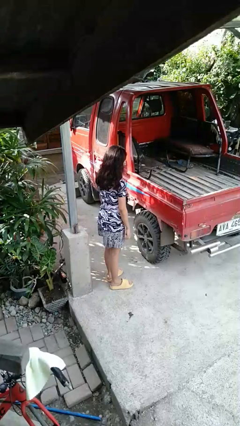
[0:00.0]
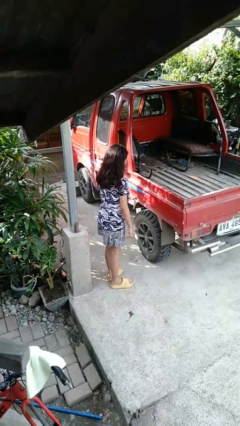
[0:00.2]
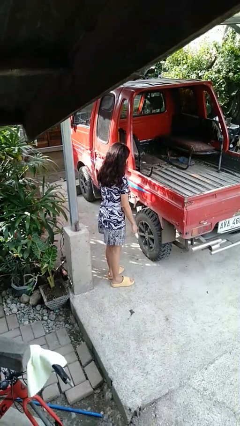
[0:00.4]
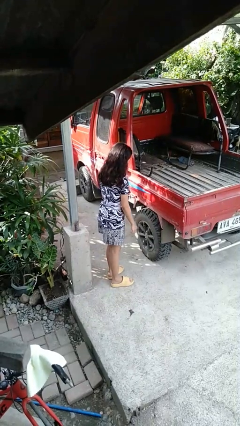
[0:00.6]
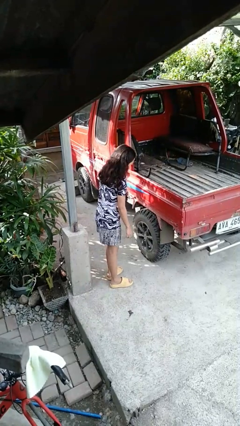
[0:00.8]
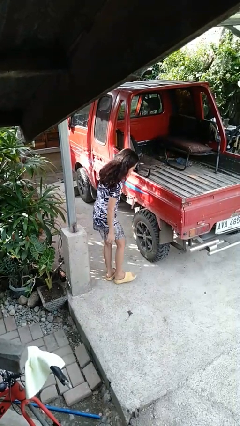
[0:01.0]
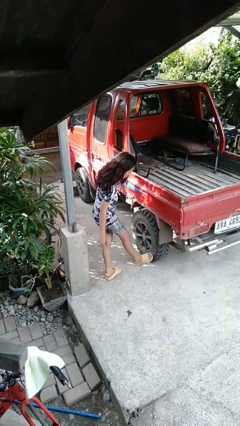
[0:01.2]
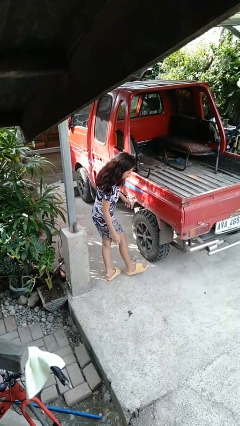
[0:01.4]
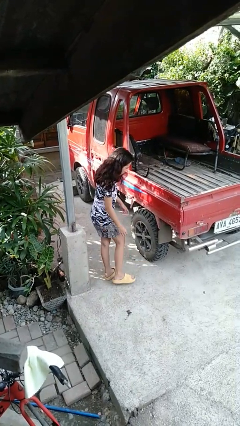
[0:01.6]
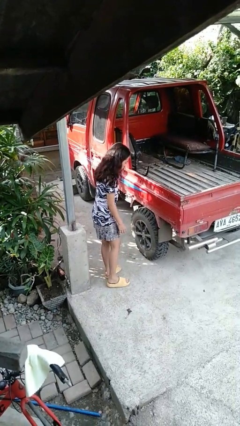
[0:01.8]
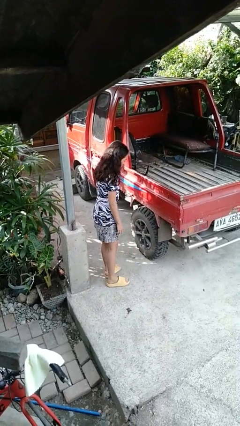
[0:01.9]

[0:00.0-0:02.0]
person kicks car tires

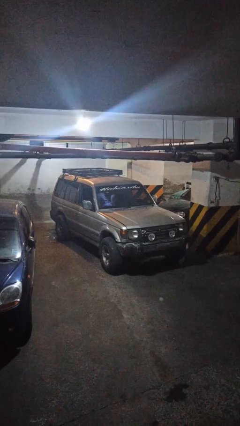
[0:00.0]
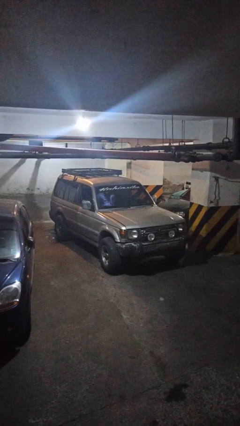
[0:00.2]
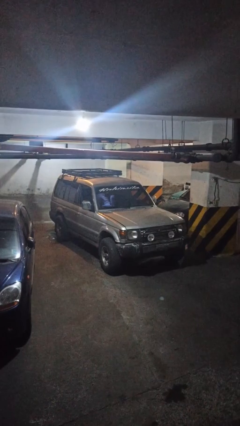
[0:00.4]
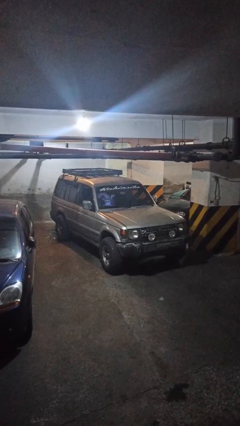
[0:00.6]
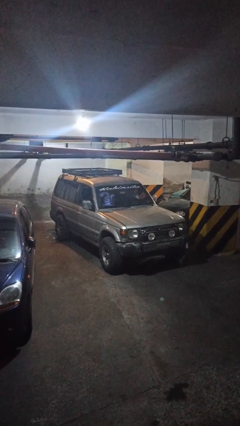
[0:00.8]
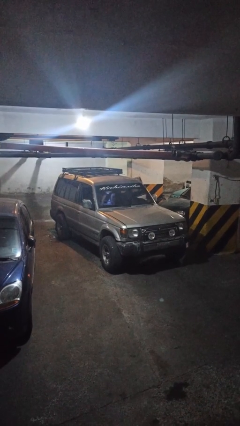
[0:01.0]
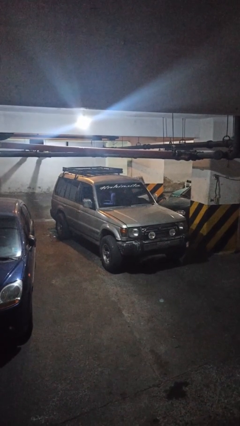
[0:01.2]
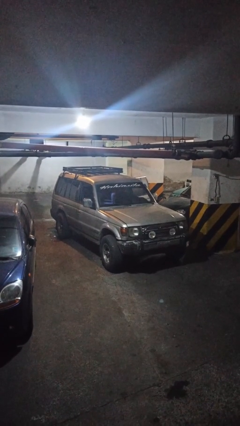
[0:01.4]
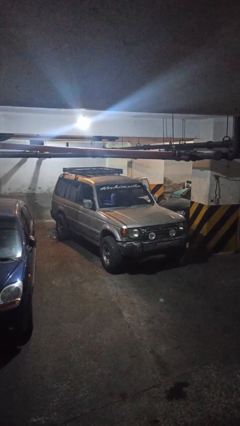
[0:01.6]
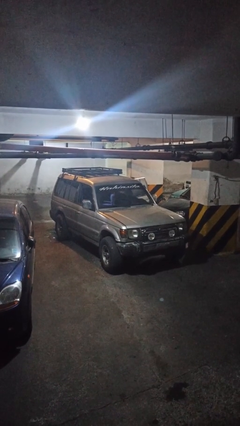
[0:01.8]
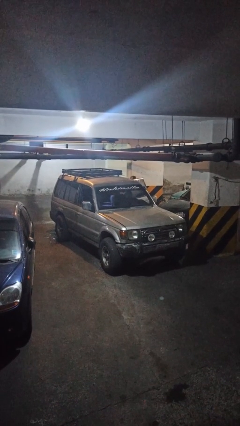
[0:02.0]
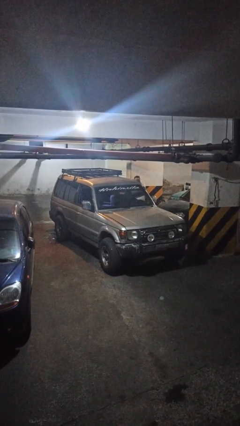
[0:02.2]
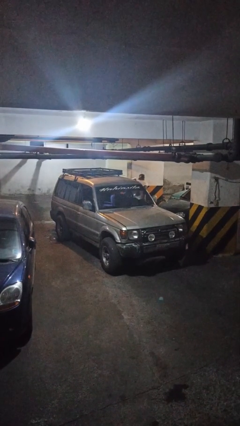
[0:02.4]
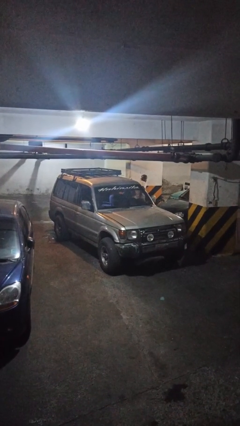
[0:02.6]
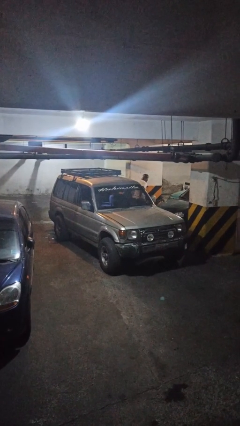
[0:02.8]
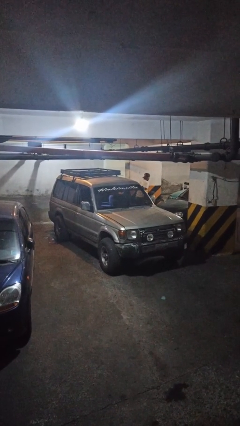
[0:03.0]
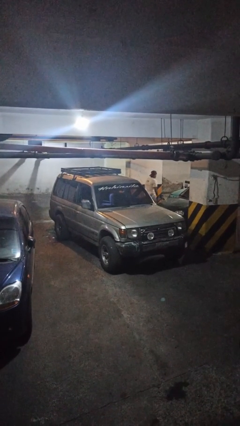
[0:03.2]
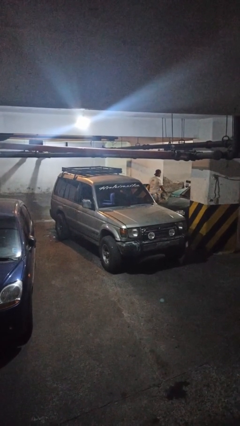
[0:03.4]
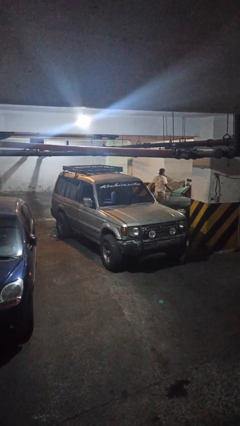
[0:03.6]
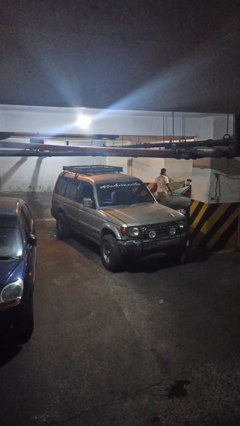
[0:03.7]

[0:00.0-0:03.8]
car drops off person

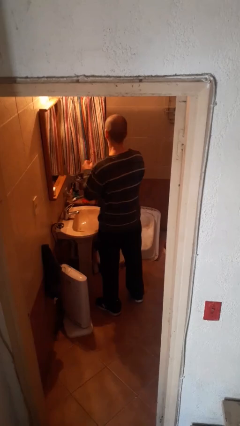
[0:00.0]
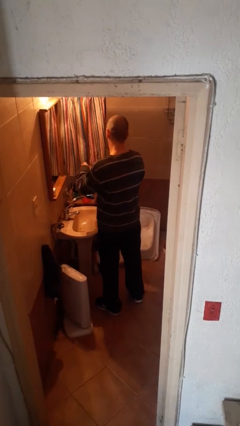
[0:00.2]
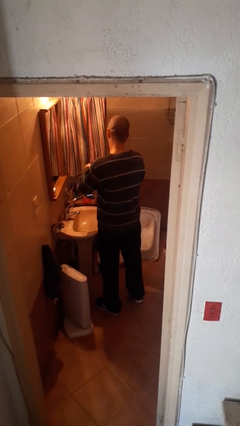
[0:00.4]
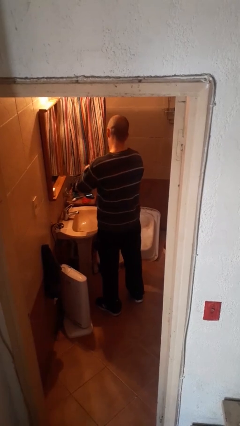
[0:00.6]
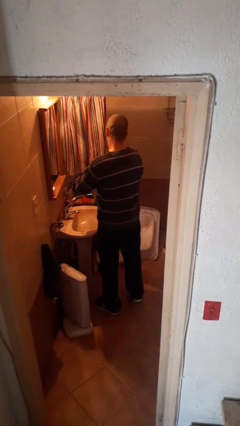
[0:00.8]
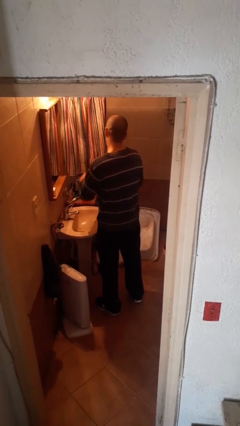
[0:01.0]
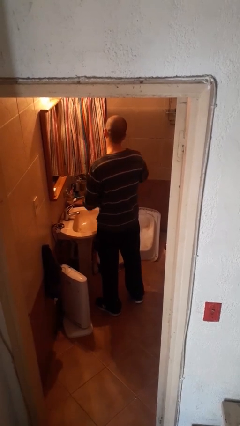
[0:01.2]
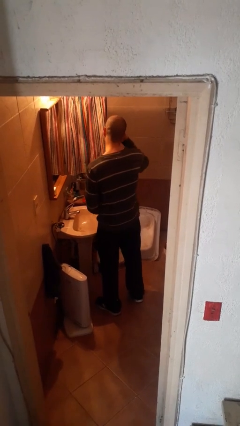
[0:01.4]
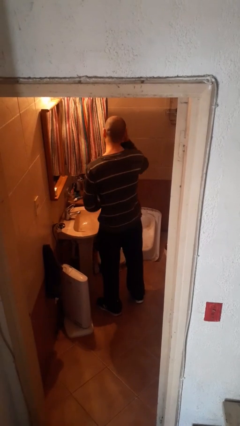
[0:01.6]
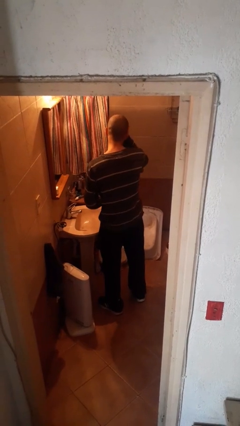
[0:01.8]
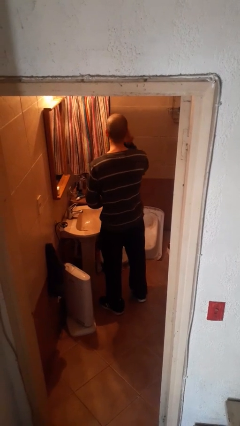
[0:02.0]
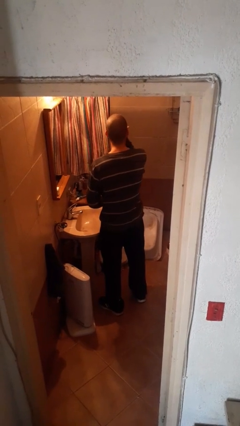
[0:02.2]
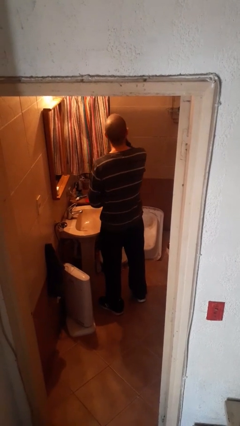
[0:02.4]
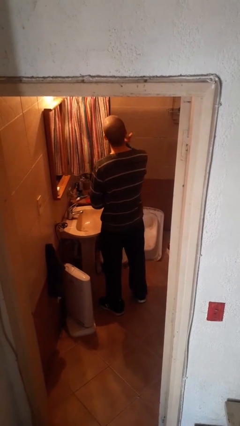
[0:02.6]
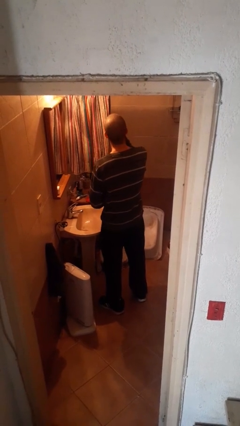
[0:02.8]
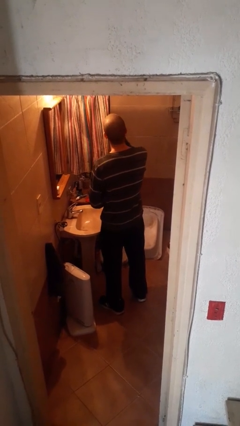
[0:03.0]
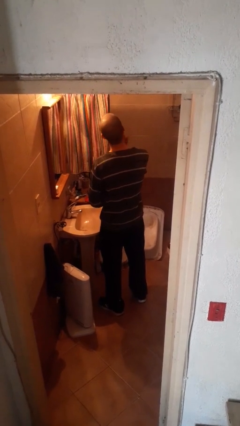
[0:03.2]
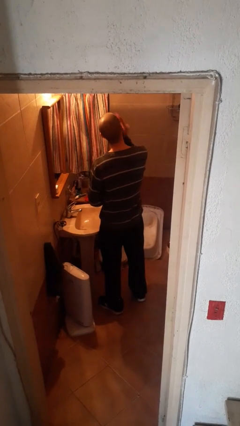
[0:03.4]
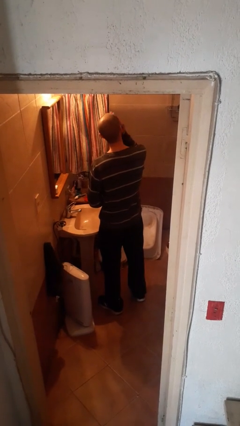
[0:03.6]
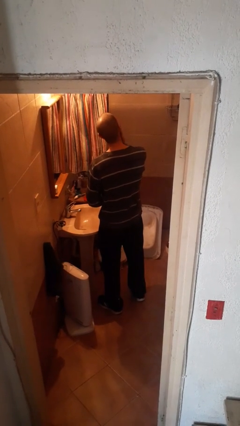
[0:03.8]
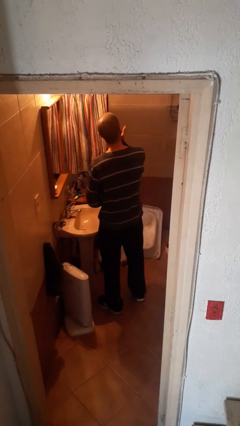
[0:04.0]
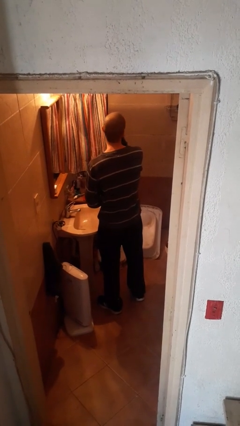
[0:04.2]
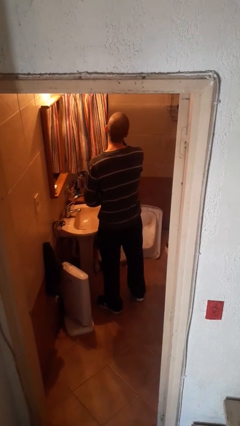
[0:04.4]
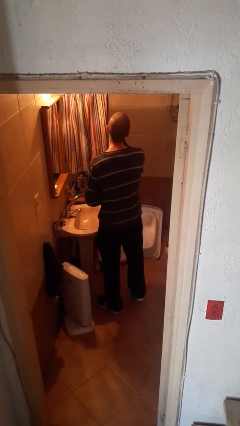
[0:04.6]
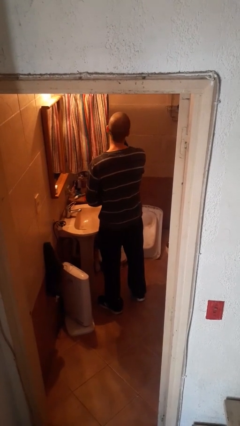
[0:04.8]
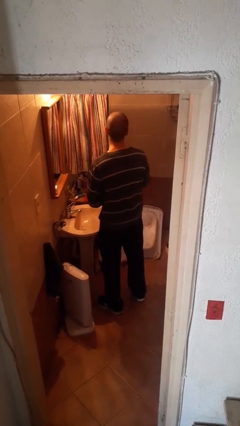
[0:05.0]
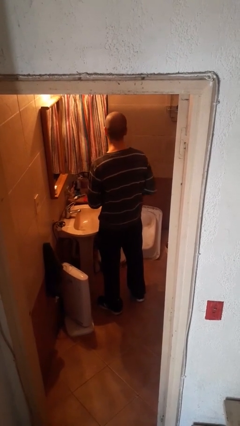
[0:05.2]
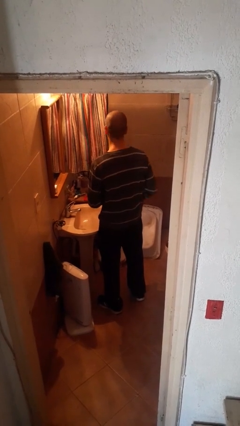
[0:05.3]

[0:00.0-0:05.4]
person applies facial moisturizer

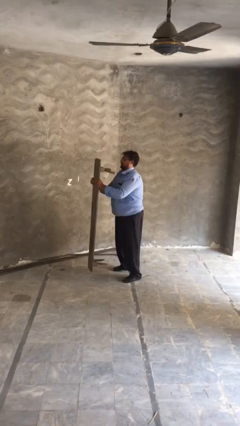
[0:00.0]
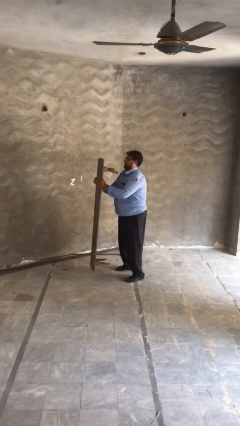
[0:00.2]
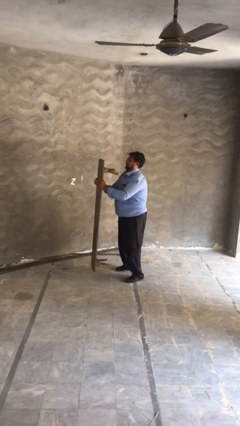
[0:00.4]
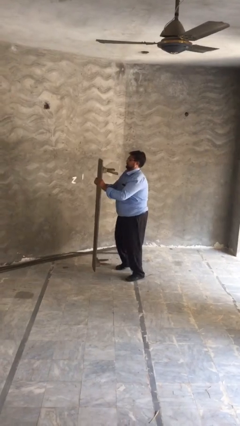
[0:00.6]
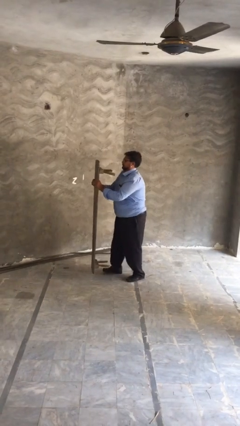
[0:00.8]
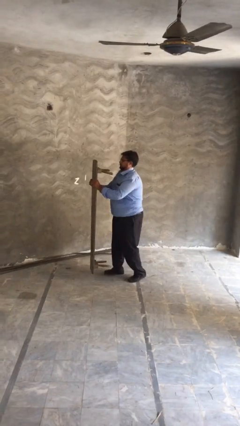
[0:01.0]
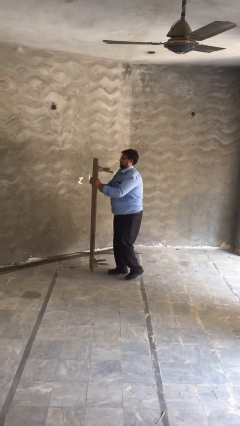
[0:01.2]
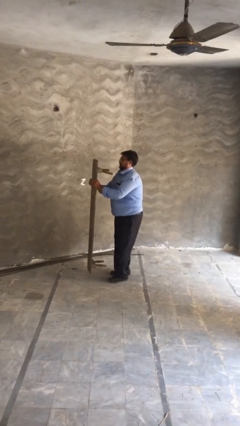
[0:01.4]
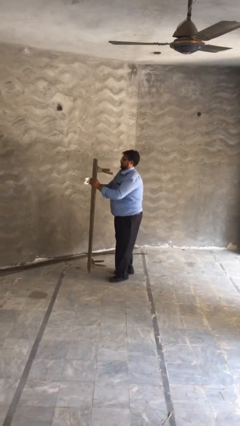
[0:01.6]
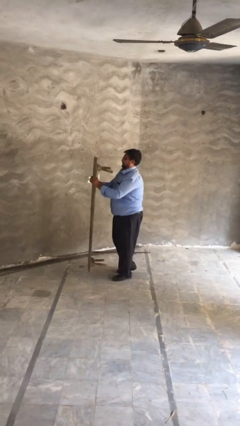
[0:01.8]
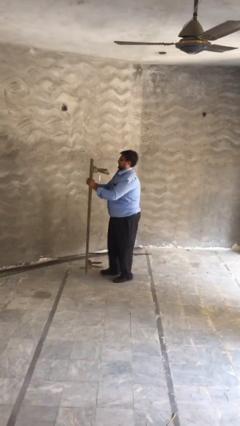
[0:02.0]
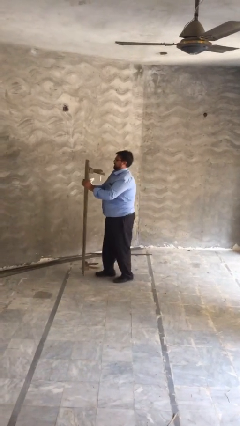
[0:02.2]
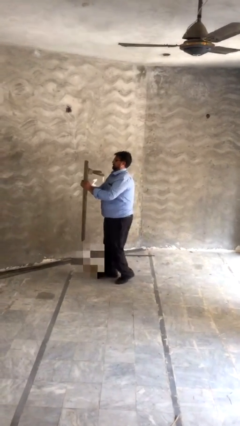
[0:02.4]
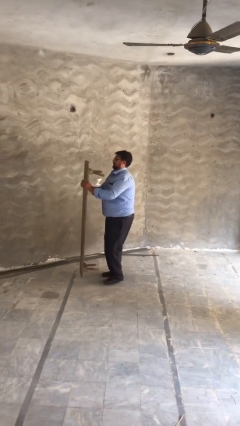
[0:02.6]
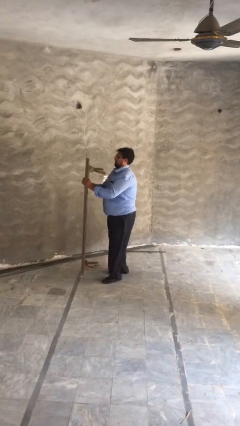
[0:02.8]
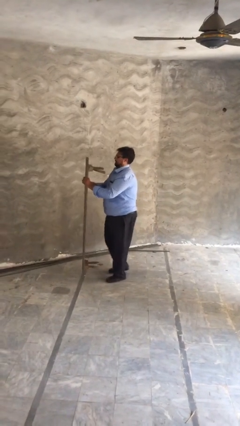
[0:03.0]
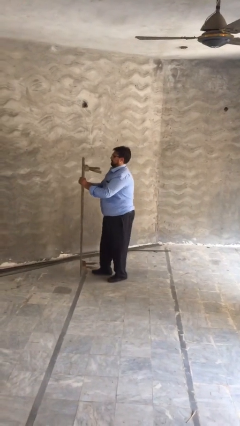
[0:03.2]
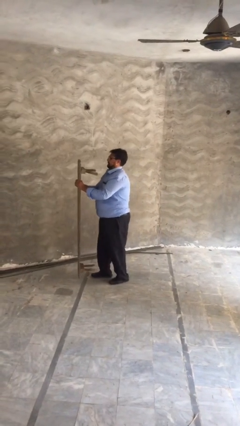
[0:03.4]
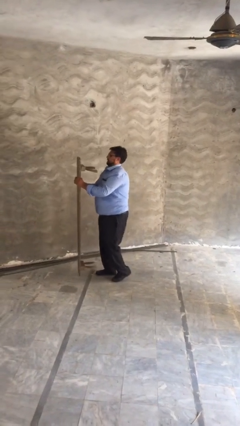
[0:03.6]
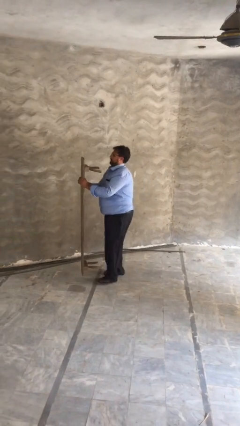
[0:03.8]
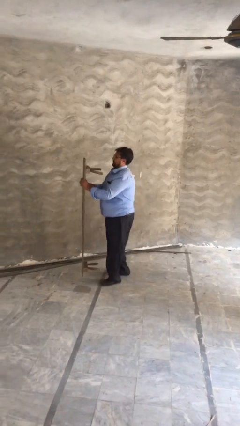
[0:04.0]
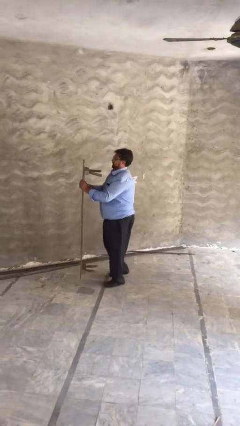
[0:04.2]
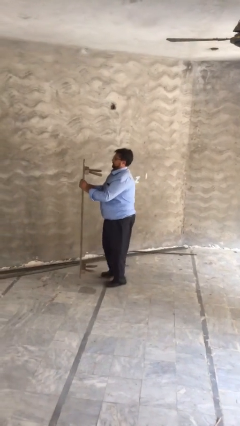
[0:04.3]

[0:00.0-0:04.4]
person carries heavy object

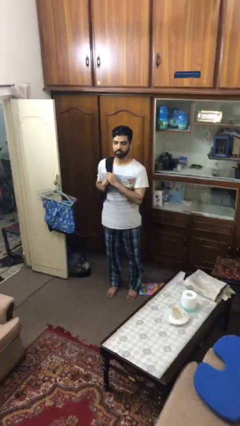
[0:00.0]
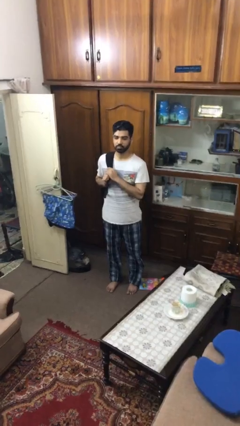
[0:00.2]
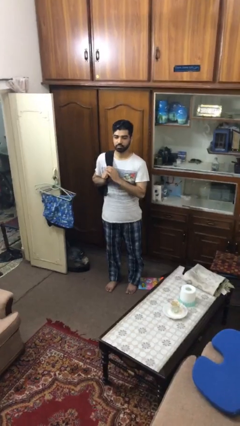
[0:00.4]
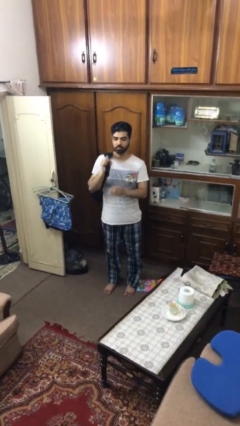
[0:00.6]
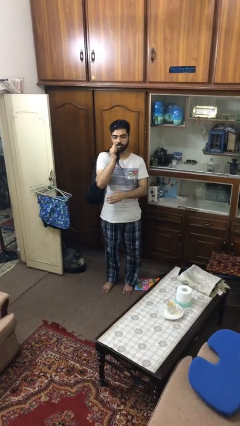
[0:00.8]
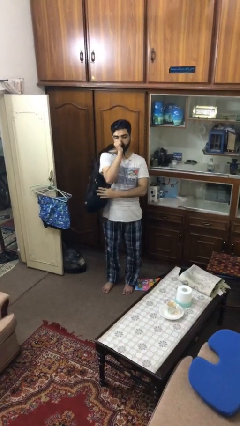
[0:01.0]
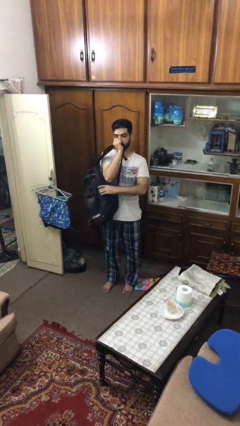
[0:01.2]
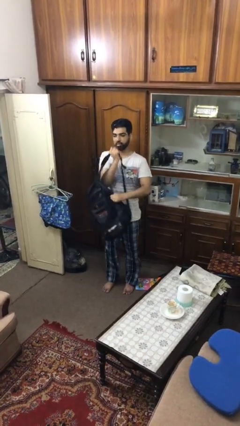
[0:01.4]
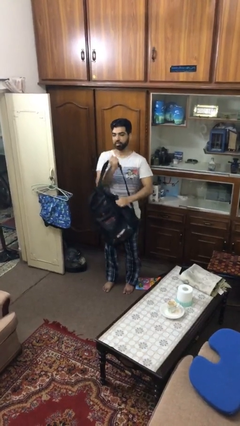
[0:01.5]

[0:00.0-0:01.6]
person takes off backpack

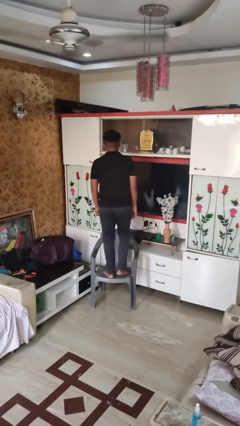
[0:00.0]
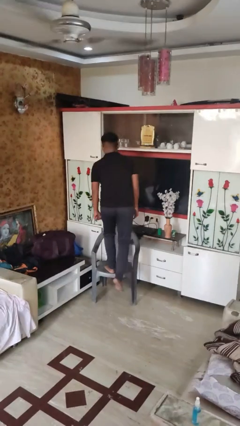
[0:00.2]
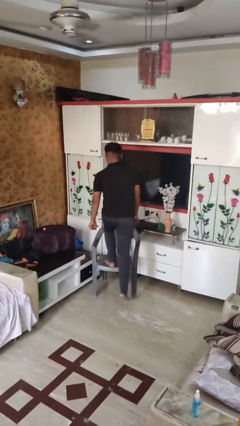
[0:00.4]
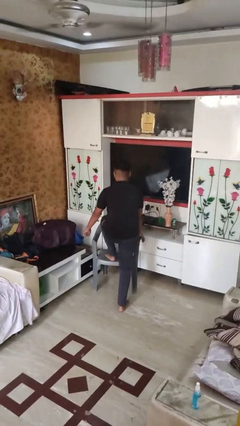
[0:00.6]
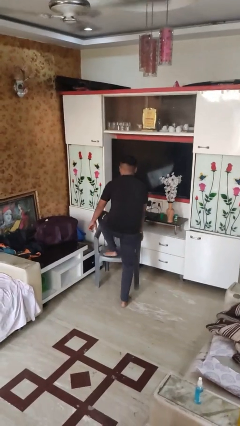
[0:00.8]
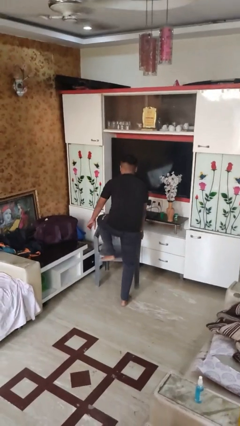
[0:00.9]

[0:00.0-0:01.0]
person climbs off chair
